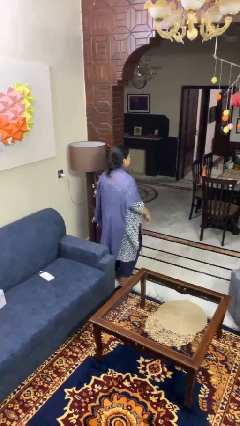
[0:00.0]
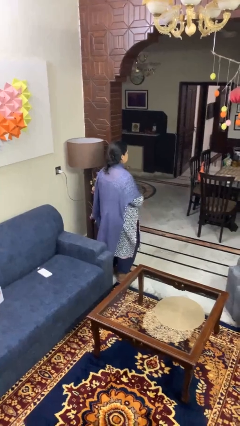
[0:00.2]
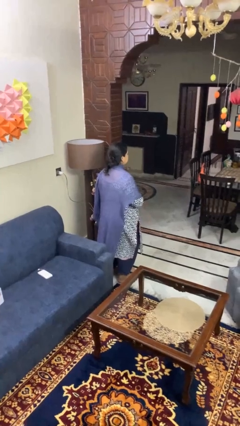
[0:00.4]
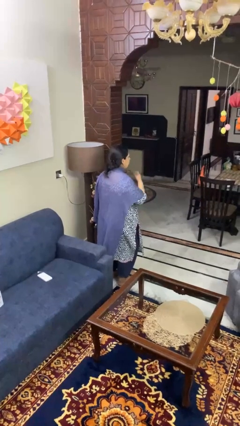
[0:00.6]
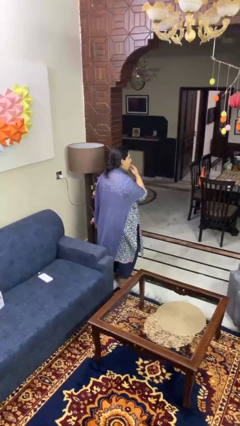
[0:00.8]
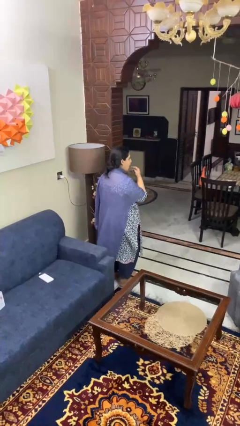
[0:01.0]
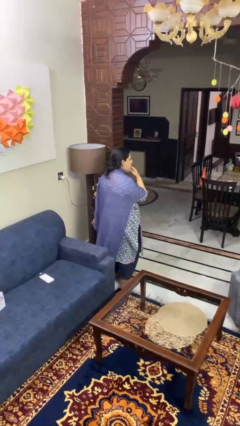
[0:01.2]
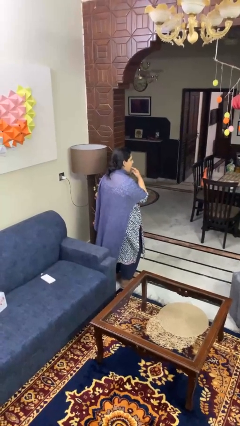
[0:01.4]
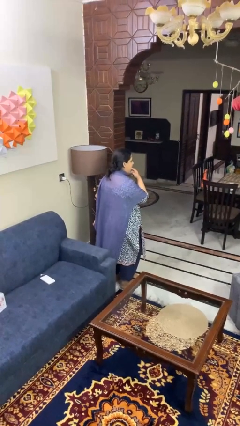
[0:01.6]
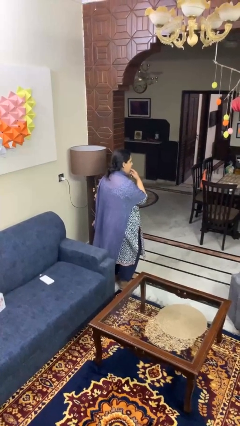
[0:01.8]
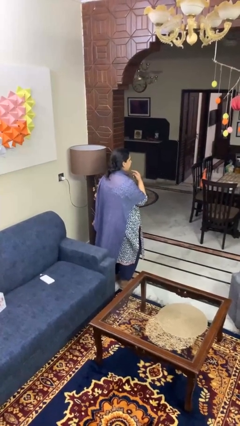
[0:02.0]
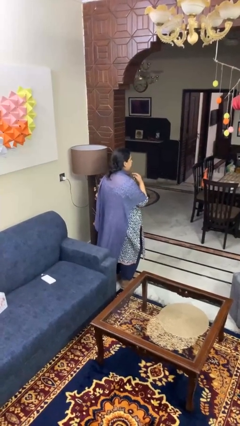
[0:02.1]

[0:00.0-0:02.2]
person licks fingers

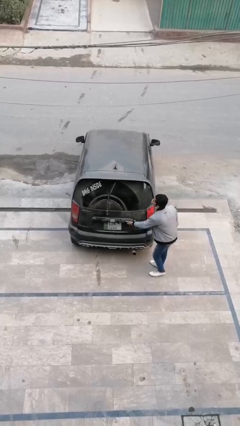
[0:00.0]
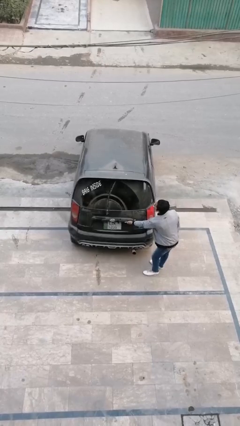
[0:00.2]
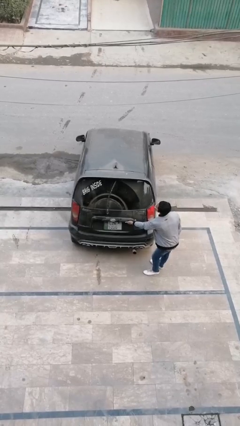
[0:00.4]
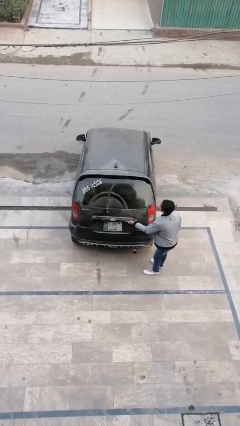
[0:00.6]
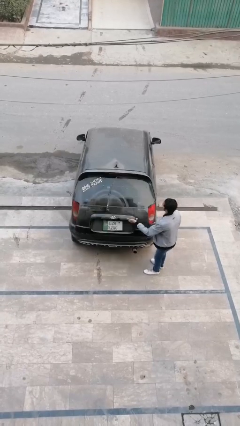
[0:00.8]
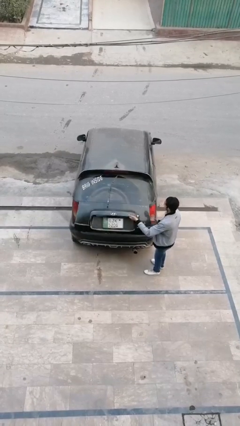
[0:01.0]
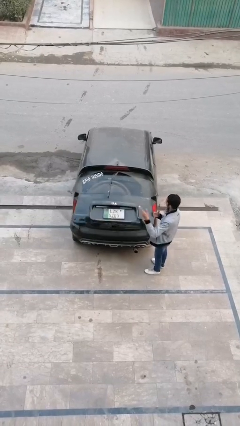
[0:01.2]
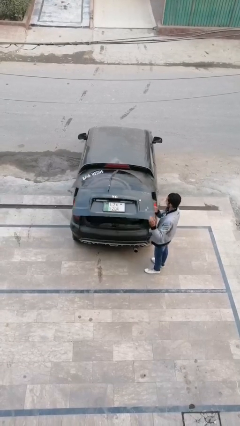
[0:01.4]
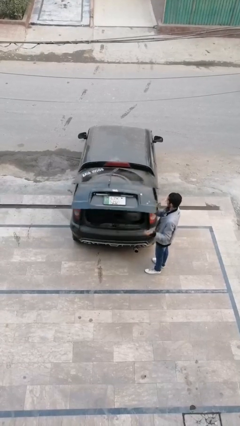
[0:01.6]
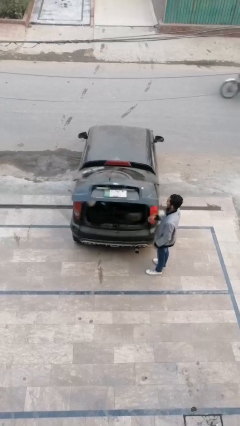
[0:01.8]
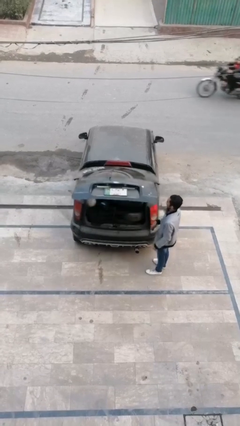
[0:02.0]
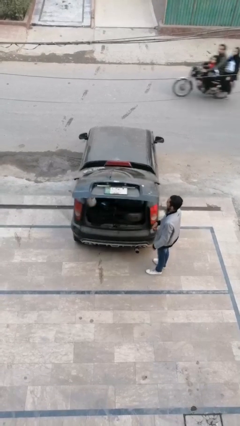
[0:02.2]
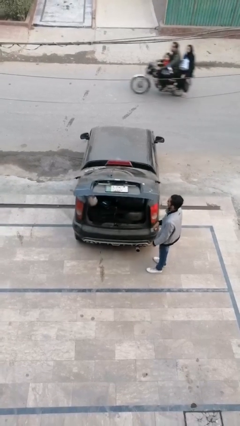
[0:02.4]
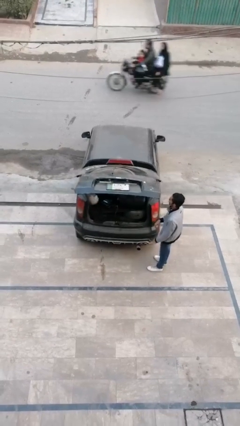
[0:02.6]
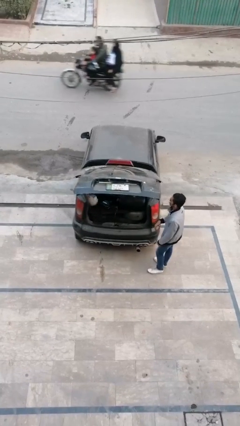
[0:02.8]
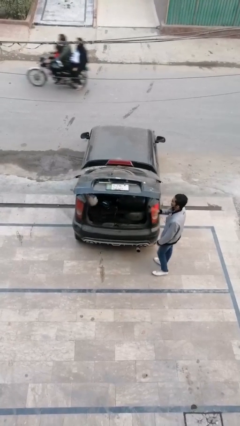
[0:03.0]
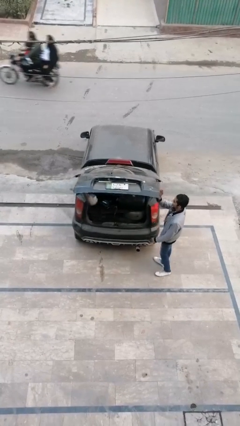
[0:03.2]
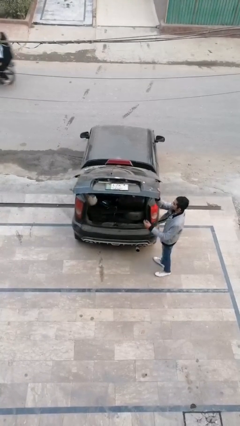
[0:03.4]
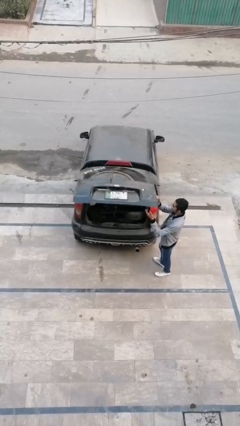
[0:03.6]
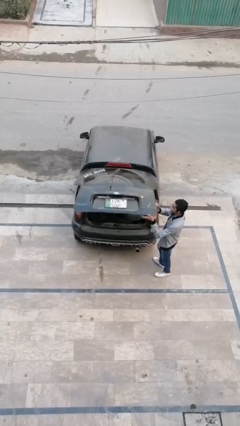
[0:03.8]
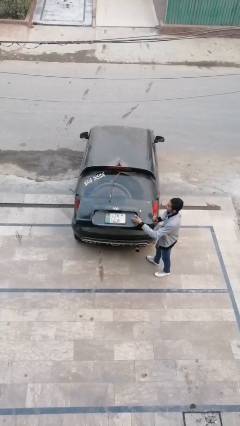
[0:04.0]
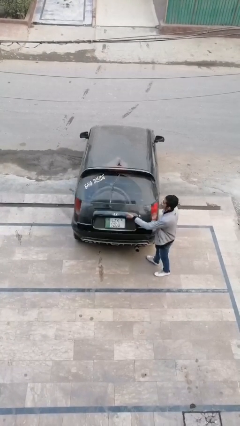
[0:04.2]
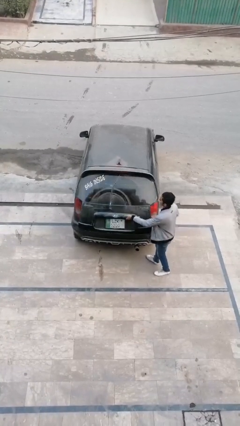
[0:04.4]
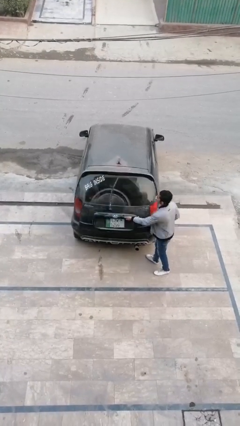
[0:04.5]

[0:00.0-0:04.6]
person opens car trunk

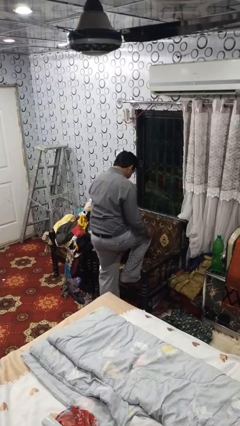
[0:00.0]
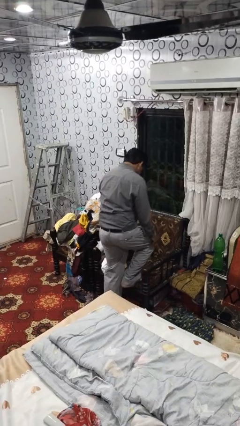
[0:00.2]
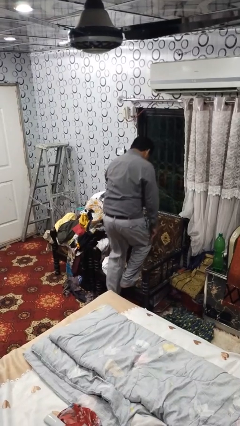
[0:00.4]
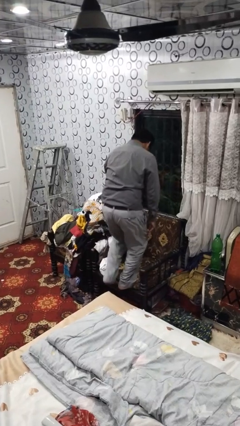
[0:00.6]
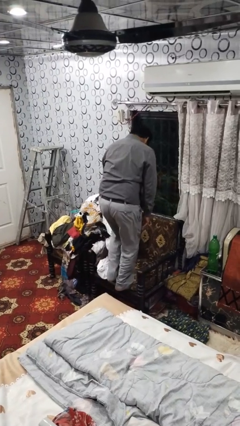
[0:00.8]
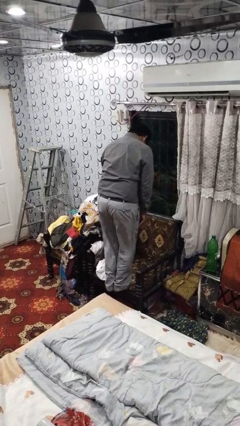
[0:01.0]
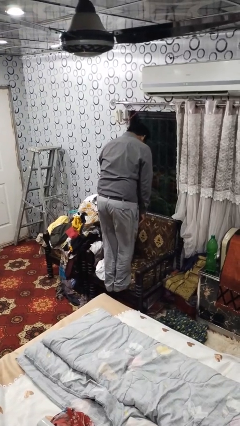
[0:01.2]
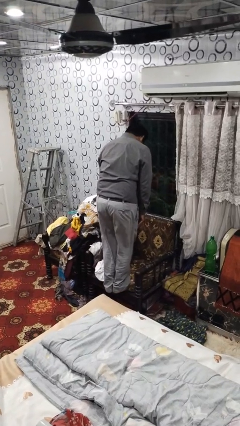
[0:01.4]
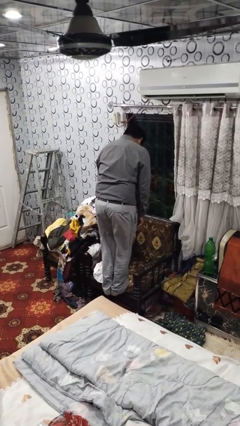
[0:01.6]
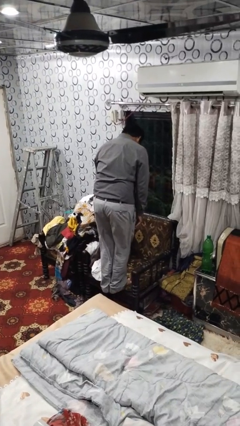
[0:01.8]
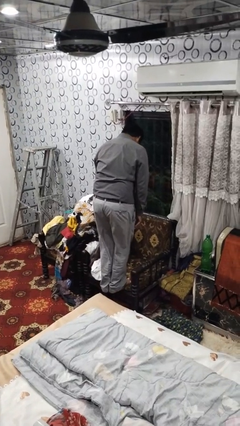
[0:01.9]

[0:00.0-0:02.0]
person climbs on couch

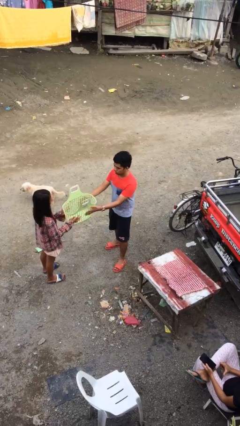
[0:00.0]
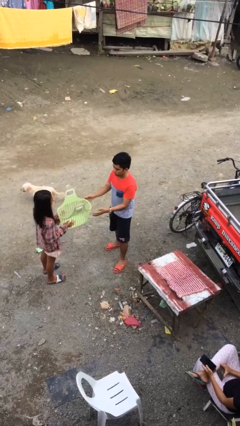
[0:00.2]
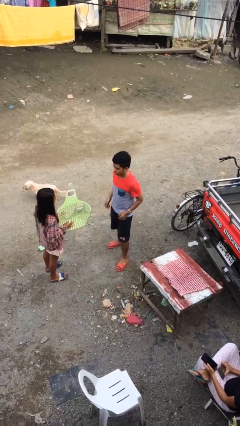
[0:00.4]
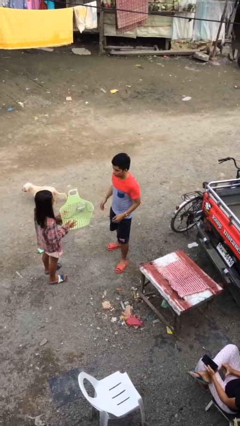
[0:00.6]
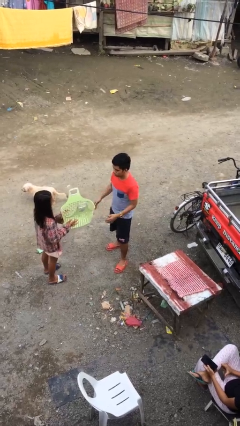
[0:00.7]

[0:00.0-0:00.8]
person transfers object to person

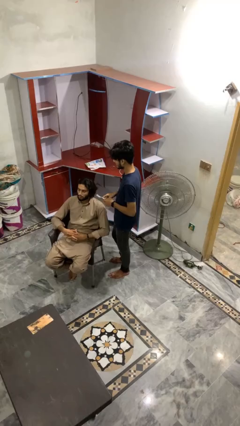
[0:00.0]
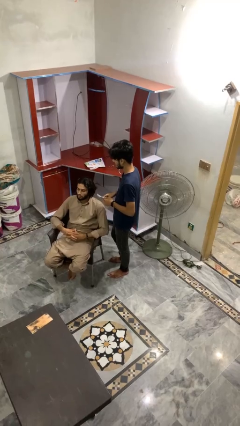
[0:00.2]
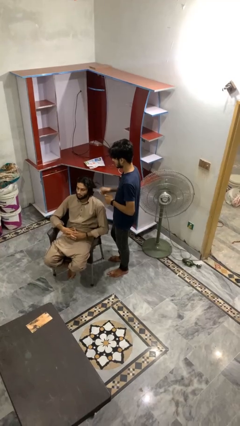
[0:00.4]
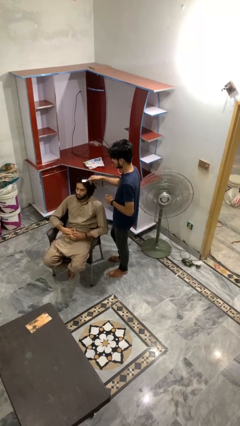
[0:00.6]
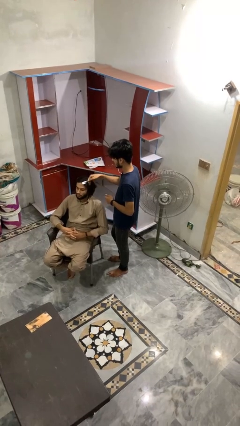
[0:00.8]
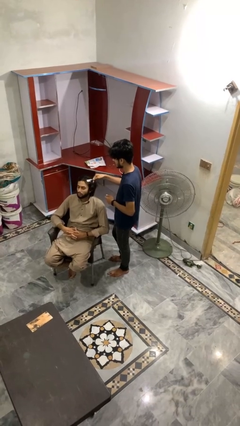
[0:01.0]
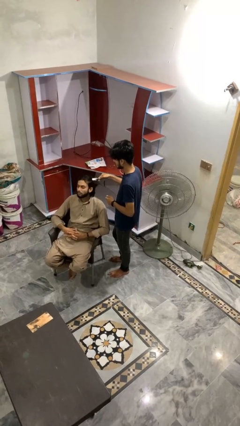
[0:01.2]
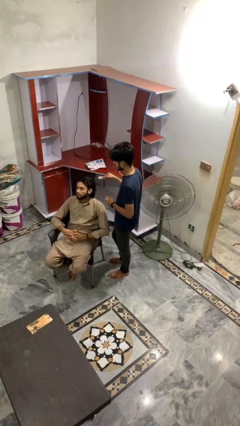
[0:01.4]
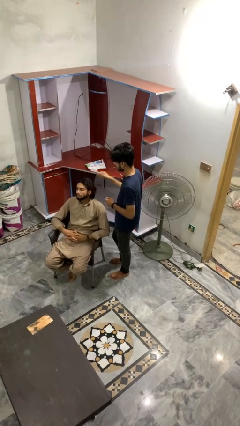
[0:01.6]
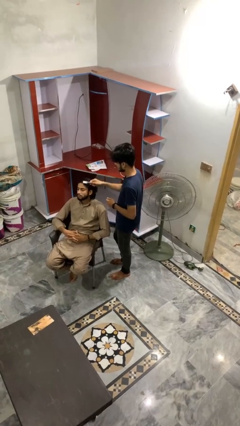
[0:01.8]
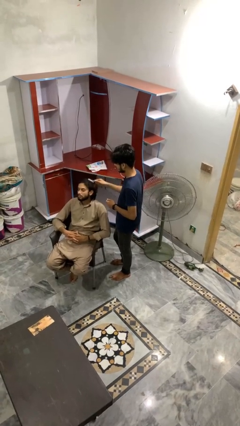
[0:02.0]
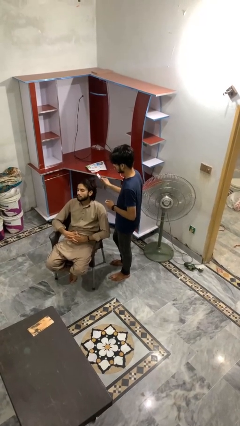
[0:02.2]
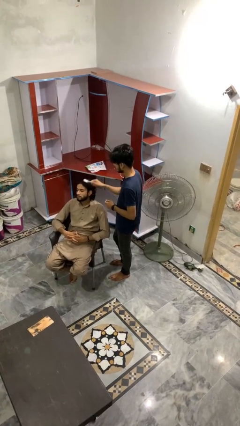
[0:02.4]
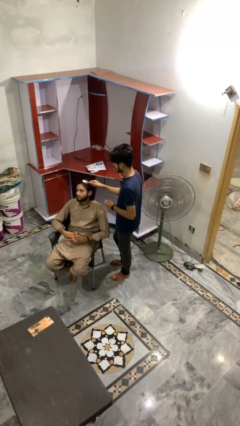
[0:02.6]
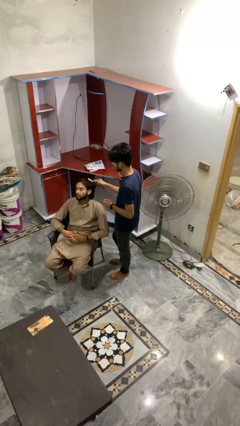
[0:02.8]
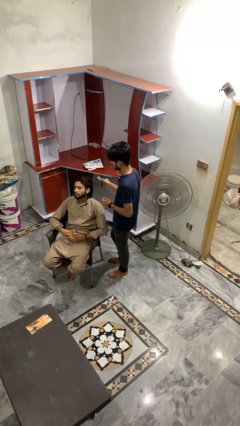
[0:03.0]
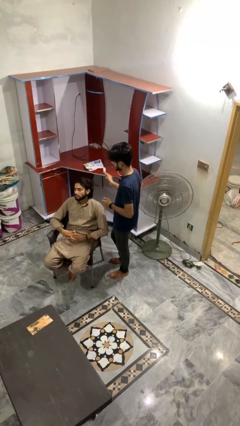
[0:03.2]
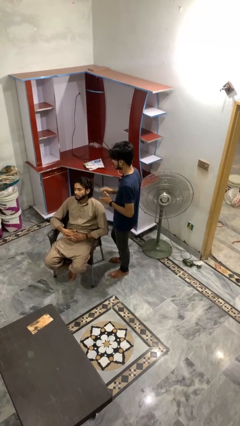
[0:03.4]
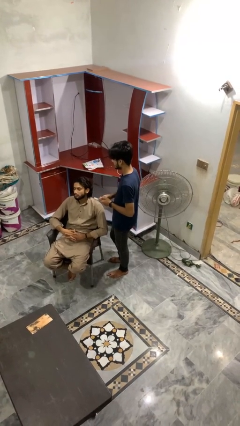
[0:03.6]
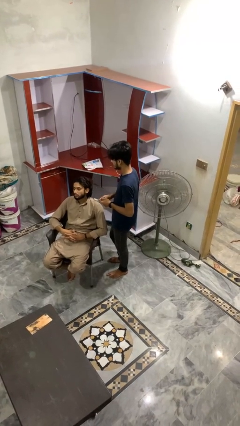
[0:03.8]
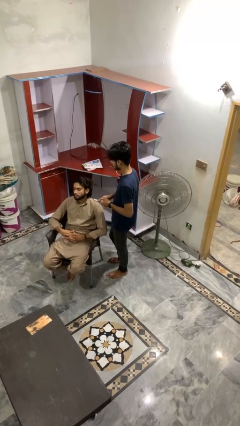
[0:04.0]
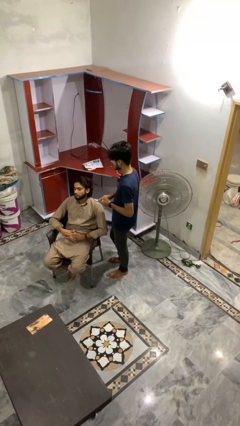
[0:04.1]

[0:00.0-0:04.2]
person brushes hair of person

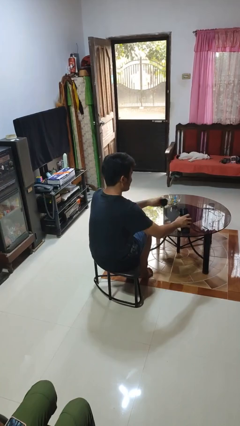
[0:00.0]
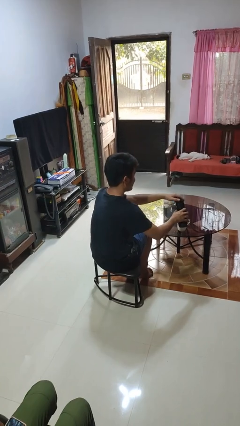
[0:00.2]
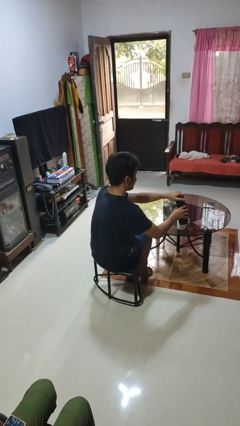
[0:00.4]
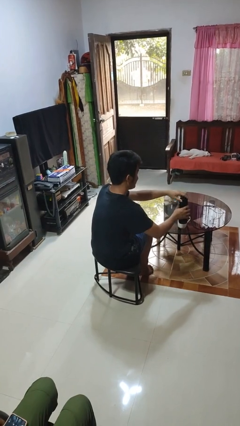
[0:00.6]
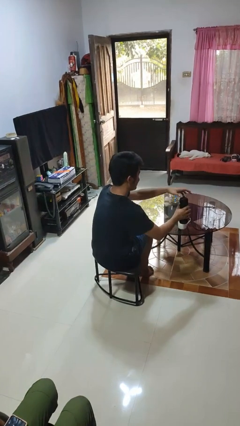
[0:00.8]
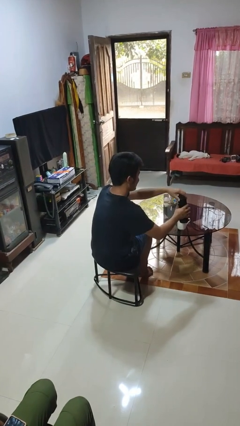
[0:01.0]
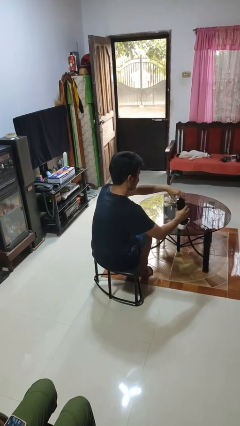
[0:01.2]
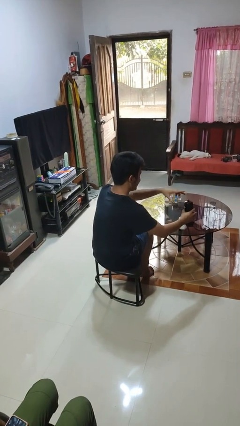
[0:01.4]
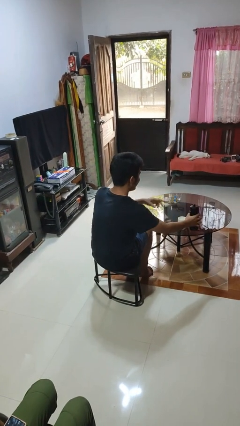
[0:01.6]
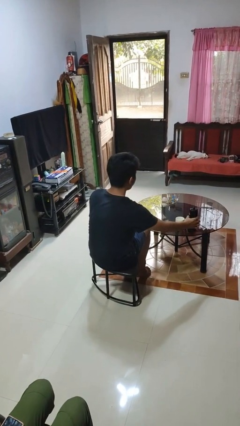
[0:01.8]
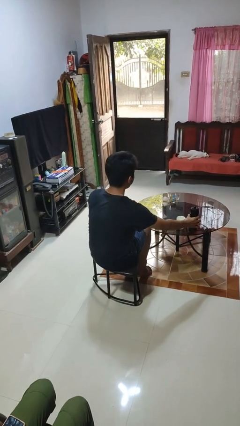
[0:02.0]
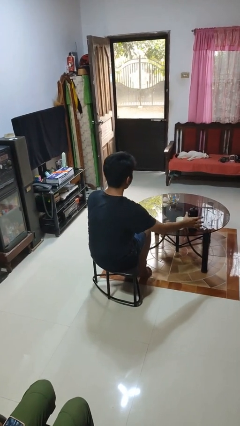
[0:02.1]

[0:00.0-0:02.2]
person screws lid to bottle

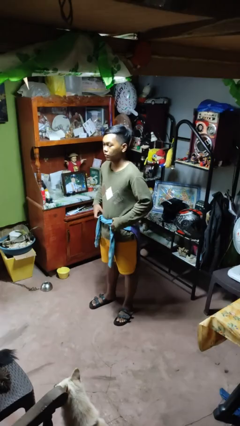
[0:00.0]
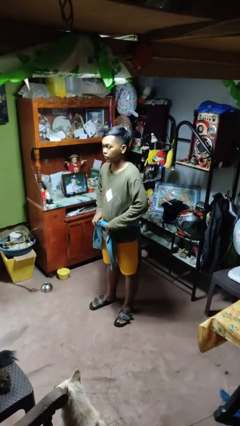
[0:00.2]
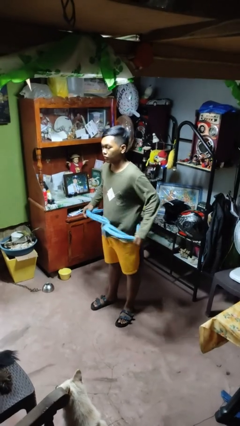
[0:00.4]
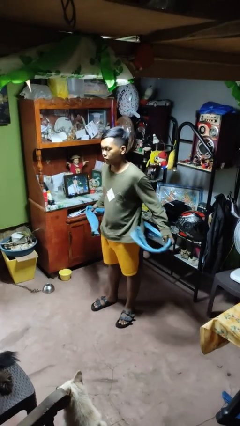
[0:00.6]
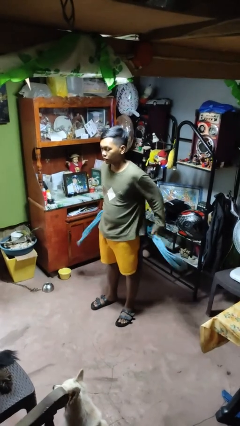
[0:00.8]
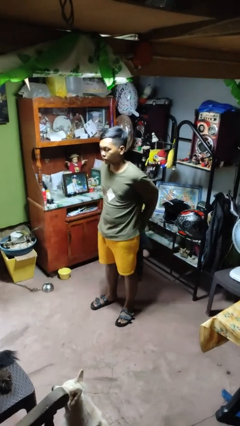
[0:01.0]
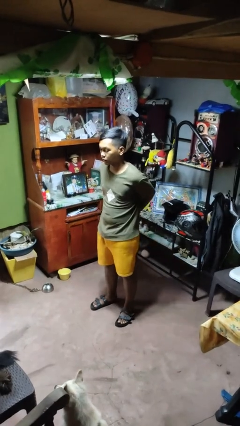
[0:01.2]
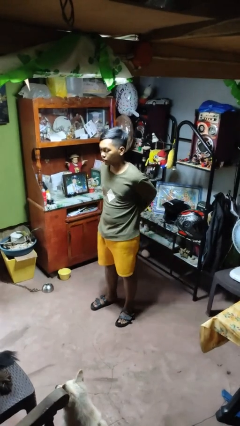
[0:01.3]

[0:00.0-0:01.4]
person unties jacket around waist
